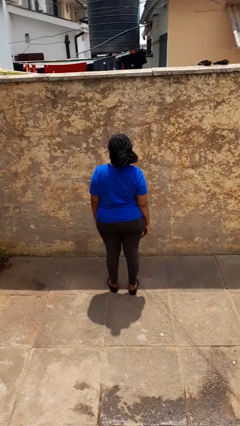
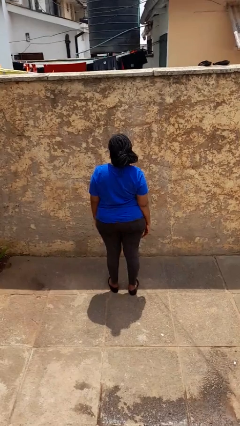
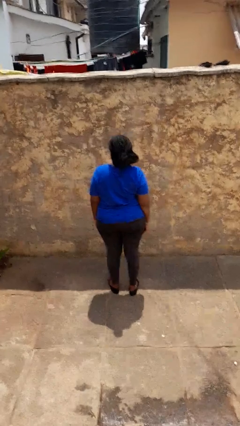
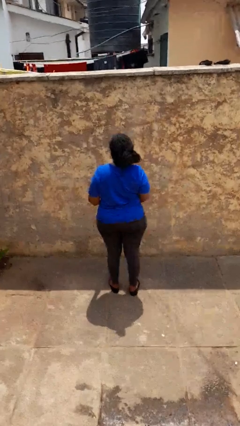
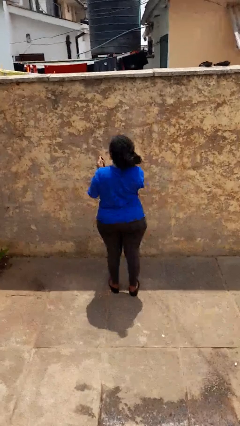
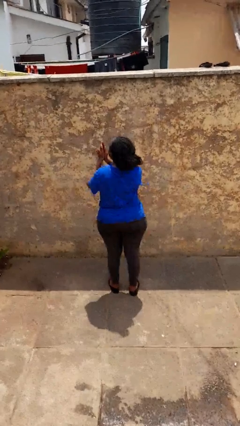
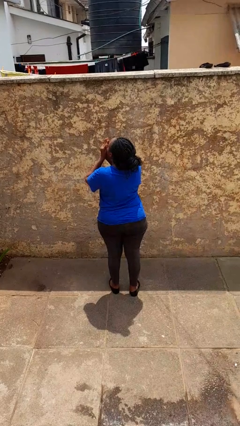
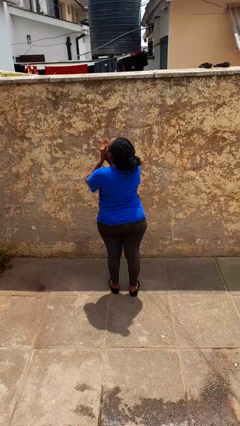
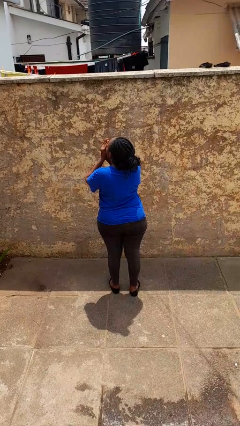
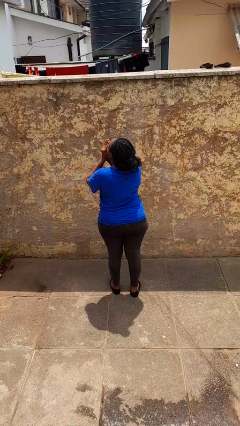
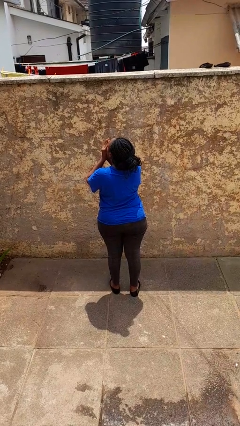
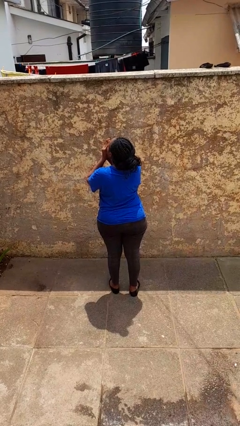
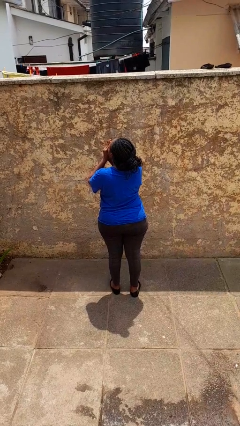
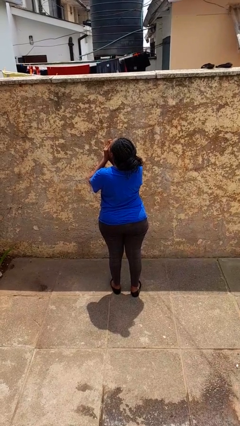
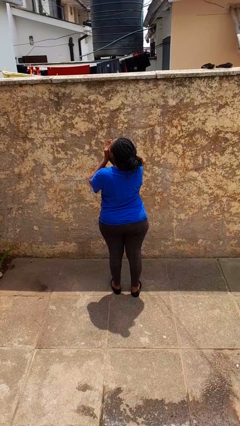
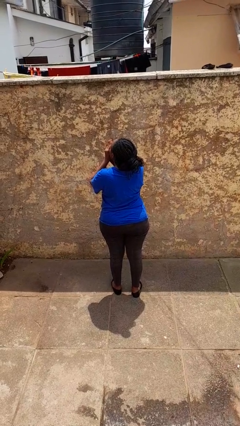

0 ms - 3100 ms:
person blows into hands

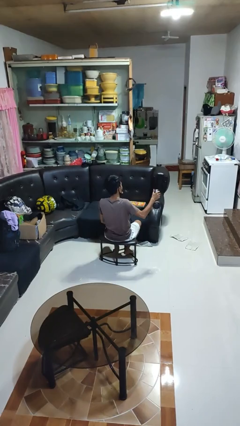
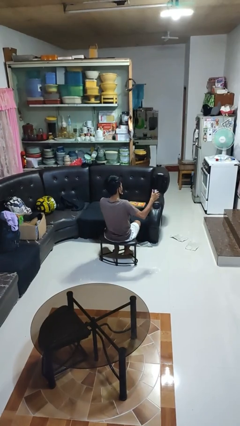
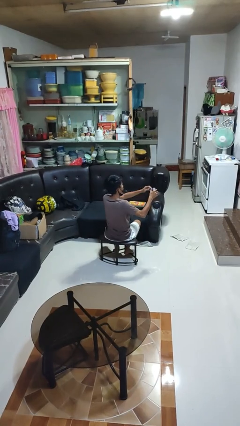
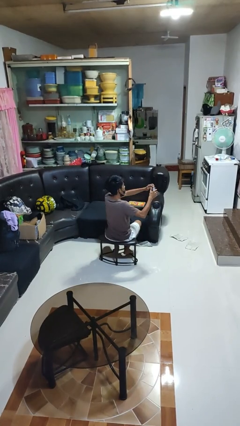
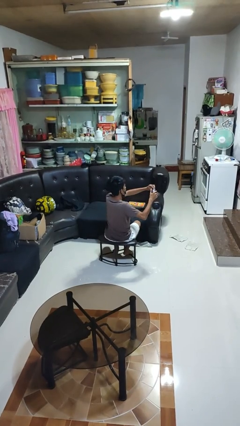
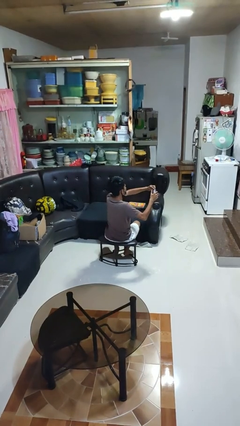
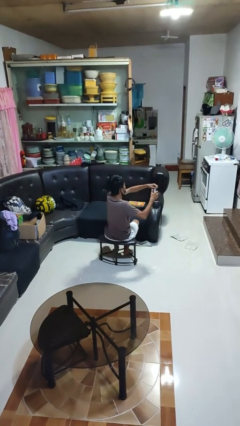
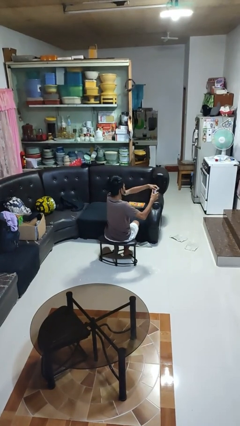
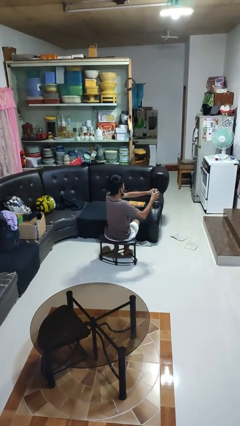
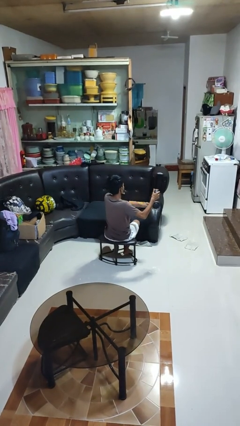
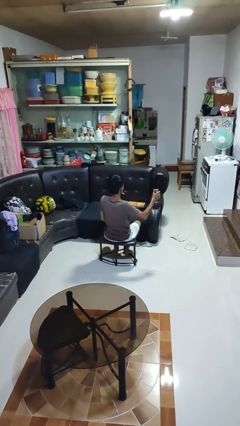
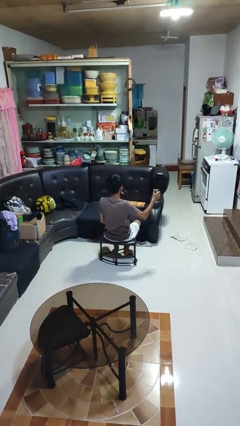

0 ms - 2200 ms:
person opens beverage can

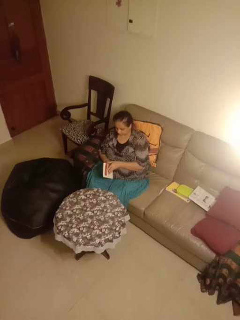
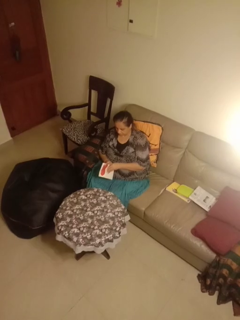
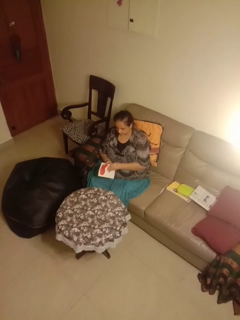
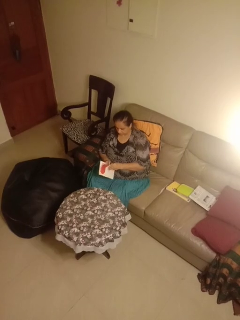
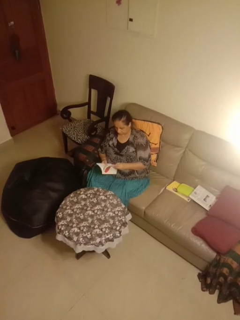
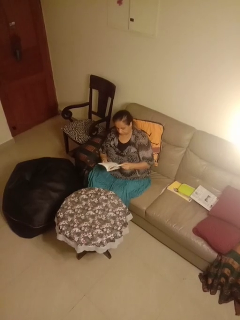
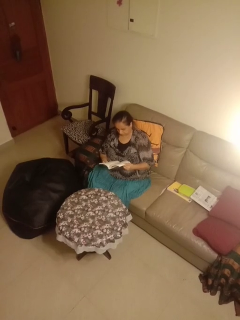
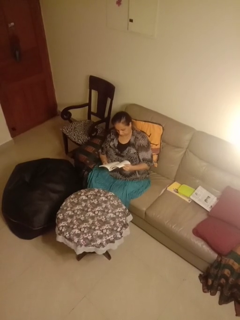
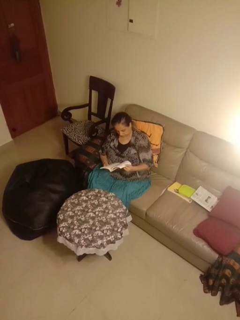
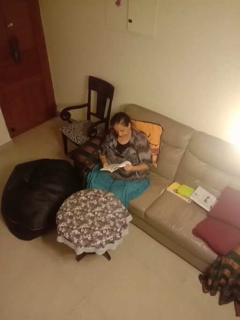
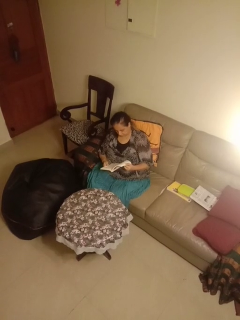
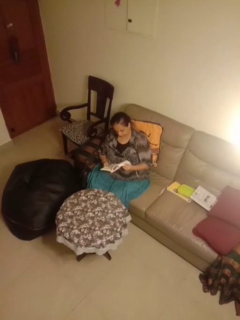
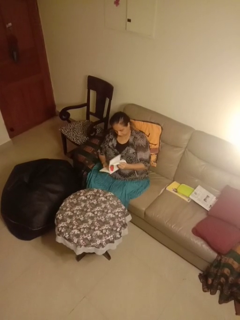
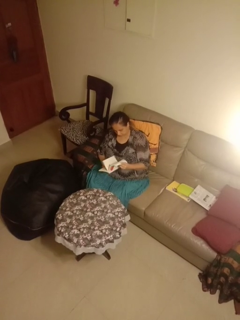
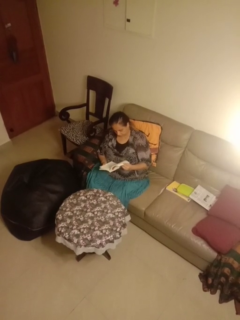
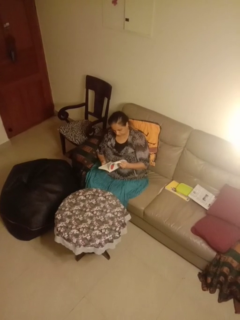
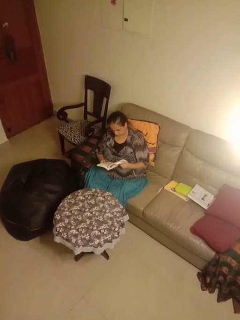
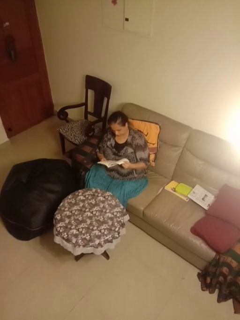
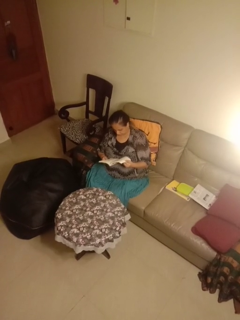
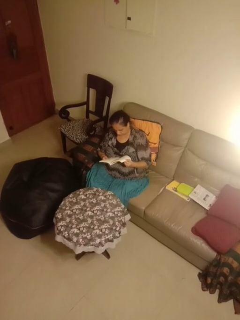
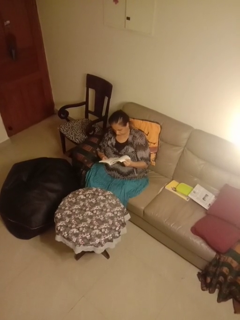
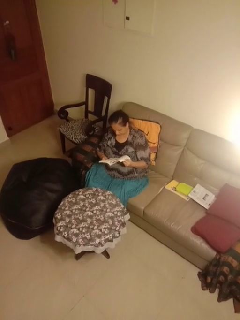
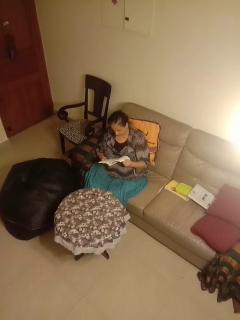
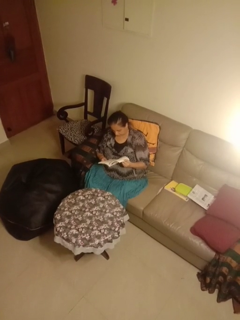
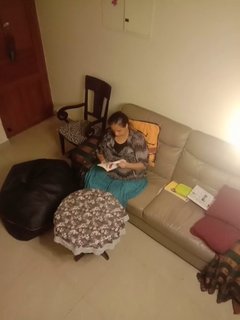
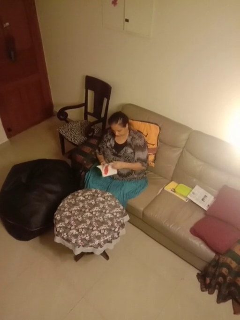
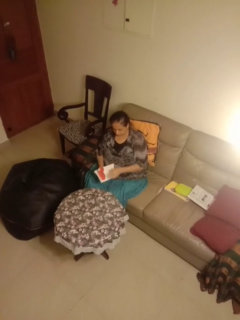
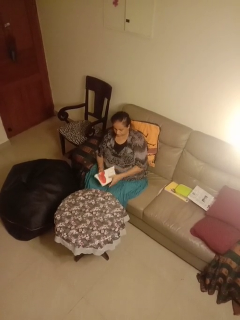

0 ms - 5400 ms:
person reads book

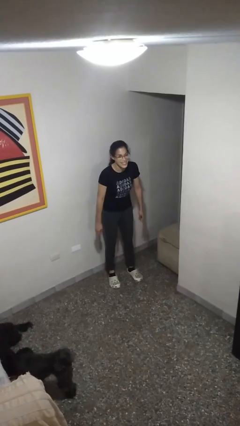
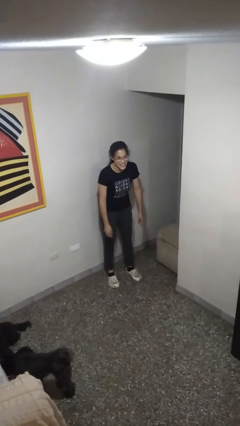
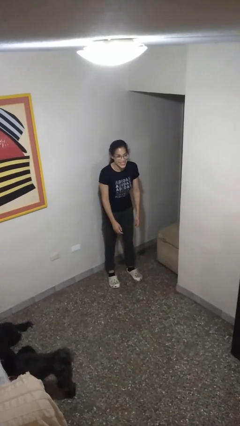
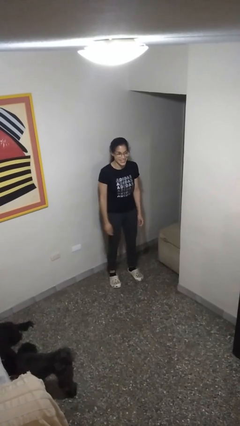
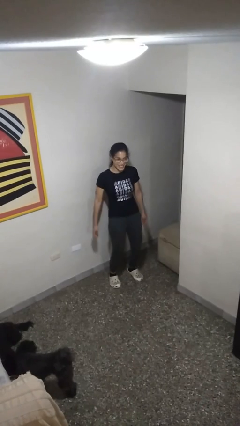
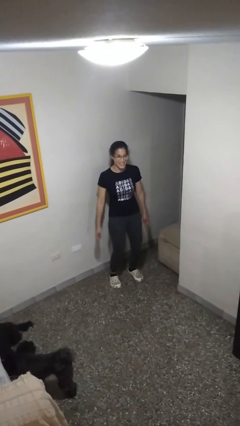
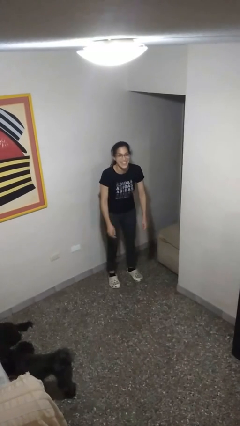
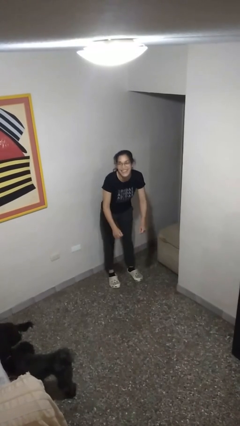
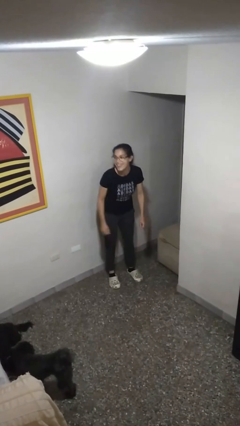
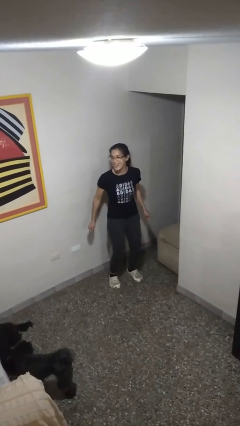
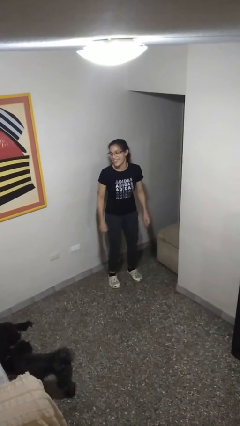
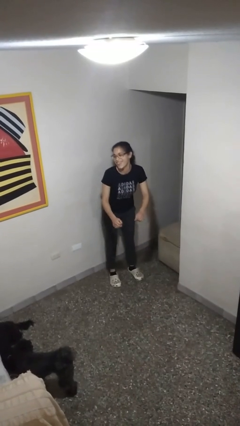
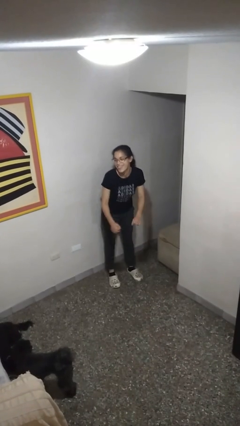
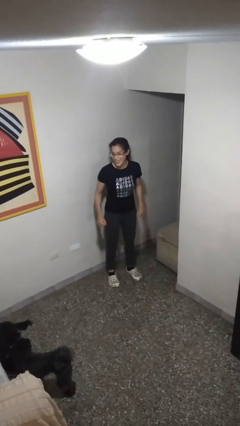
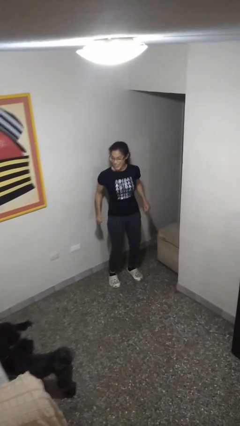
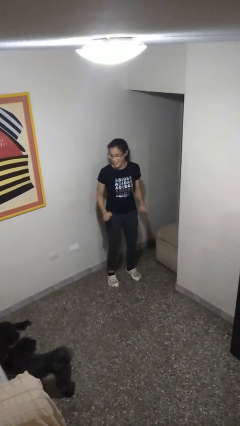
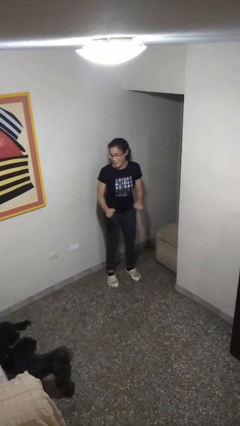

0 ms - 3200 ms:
person wiggles hips

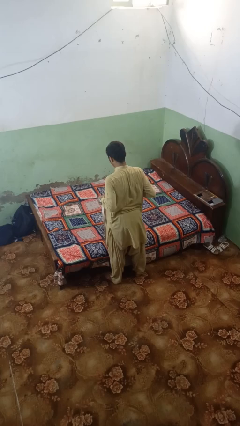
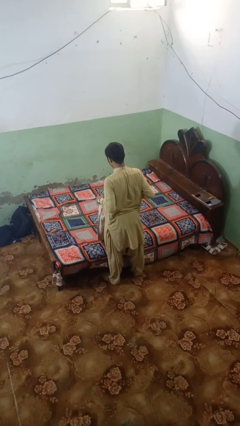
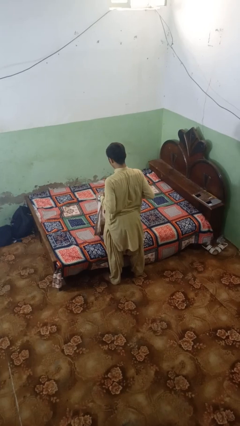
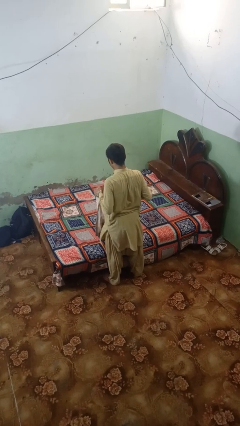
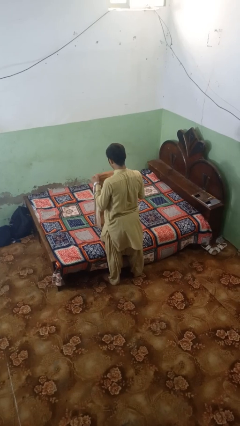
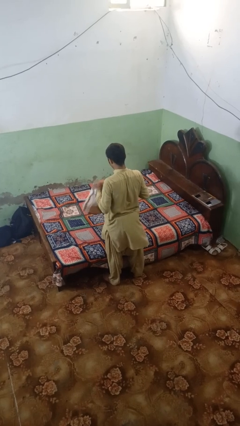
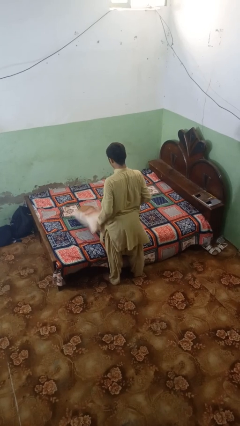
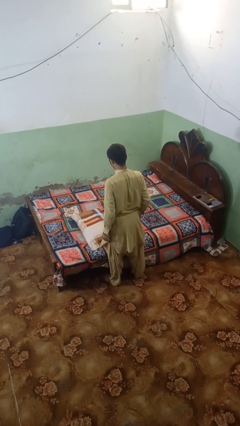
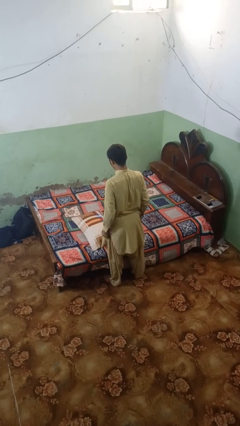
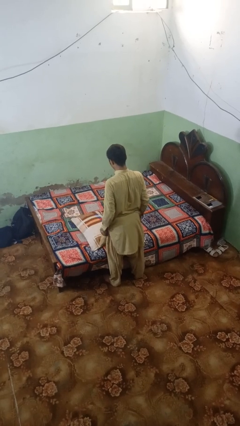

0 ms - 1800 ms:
person throws object on bed

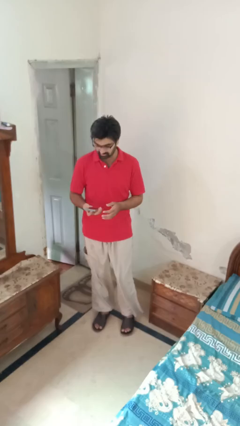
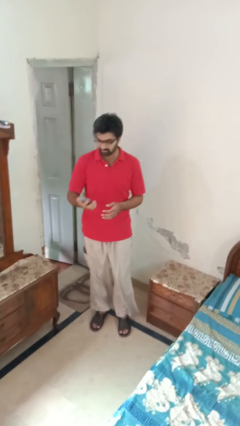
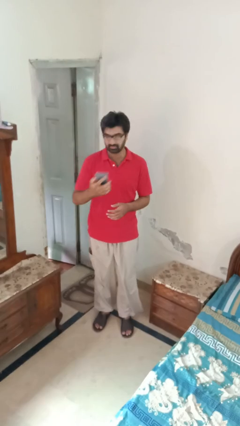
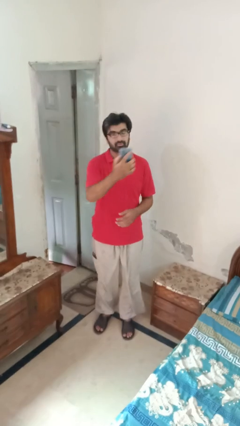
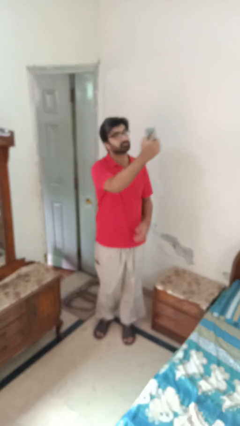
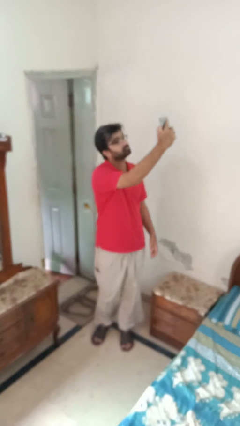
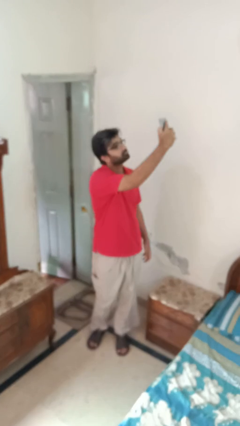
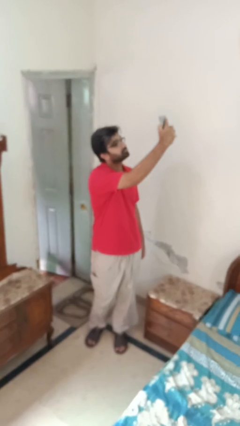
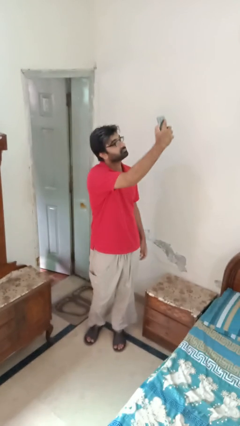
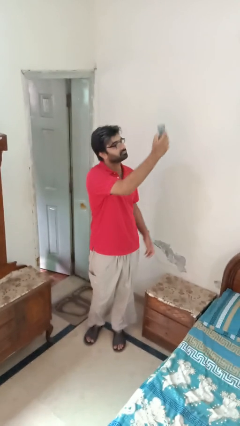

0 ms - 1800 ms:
person takes selfie

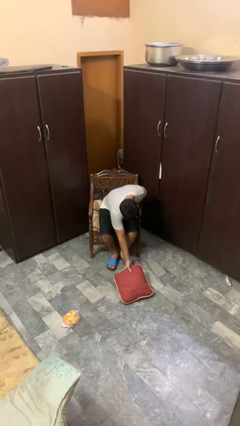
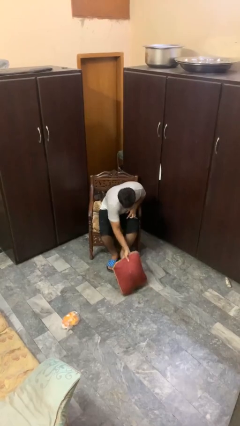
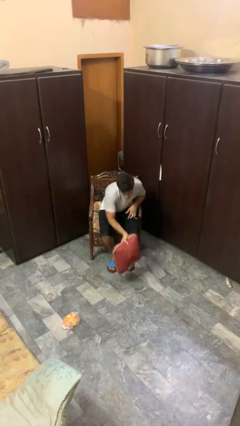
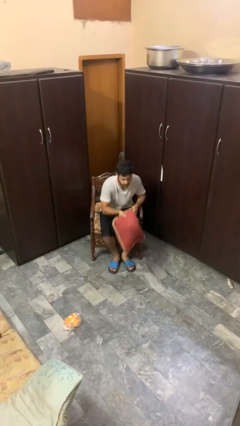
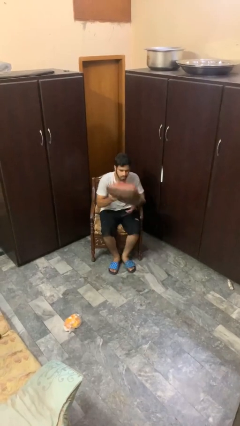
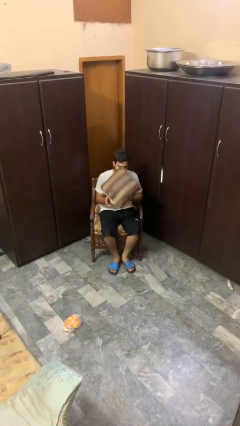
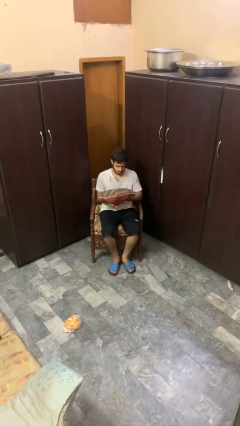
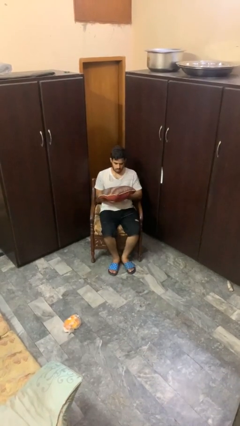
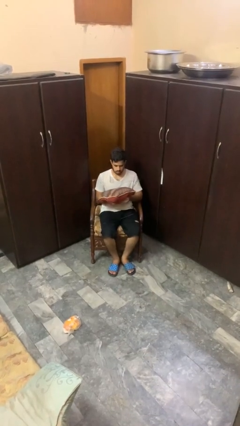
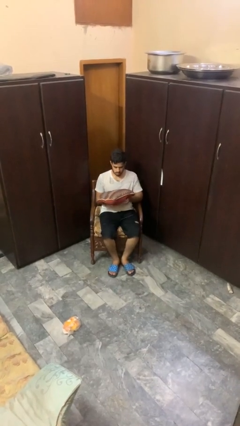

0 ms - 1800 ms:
person picks up object from floor
